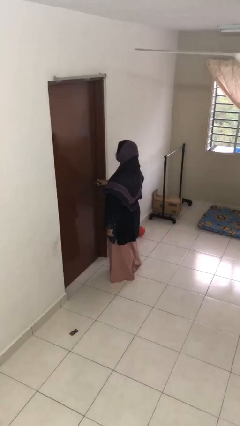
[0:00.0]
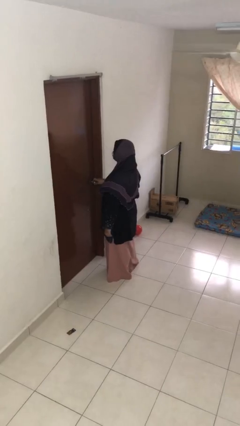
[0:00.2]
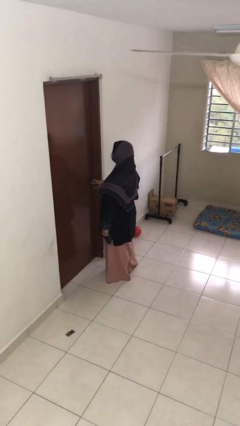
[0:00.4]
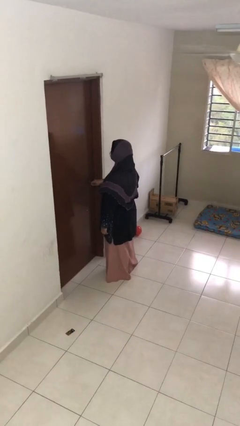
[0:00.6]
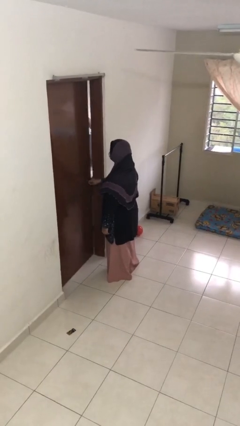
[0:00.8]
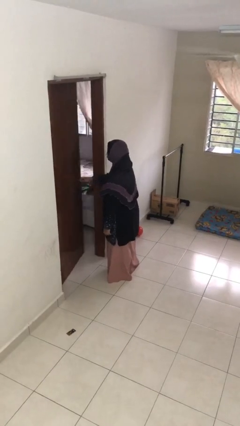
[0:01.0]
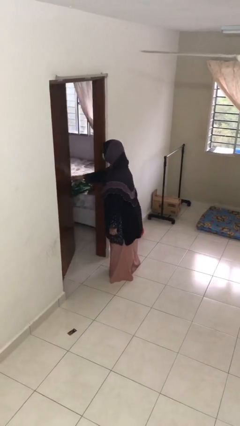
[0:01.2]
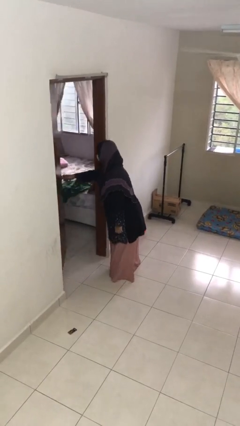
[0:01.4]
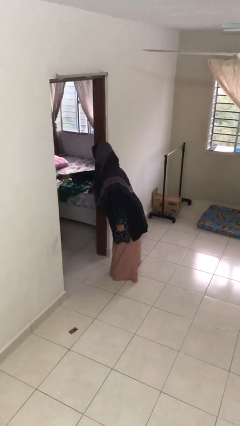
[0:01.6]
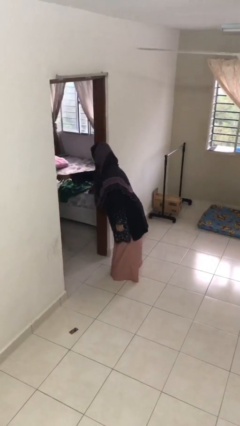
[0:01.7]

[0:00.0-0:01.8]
person opens facility door

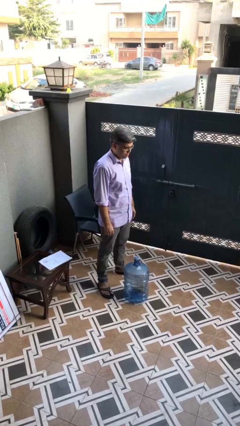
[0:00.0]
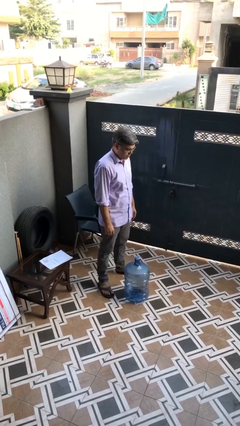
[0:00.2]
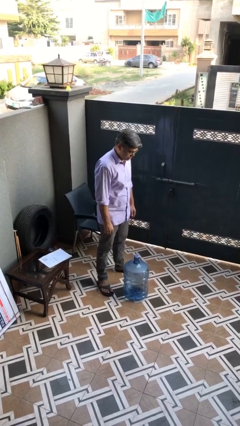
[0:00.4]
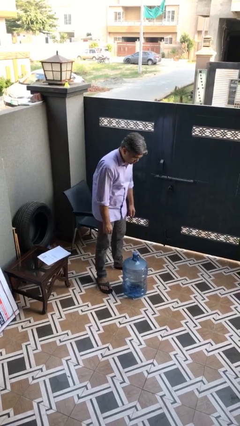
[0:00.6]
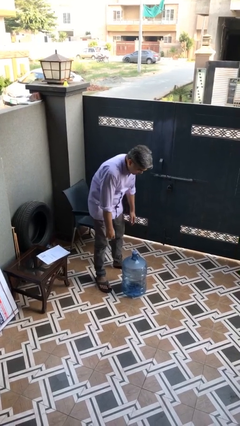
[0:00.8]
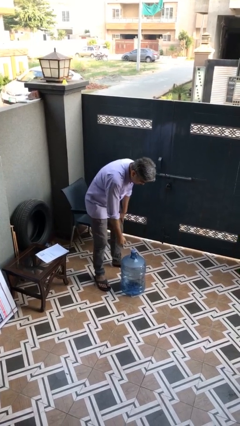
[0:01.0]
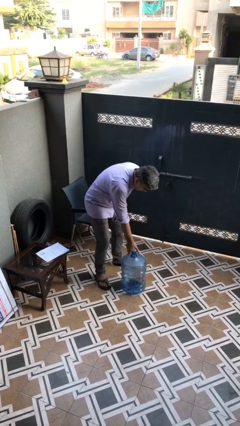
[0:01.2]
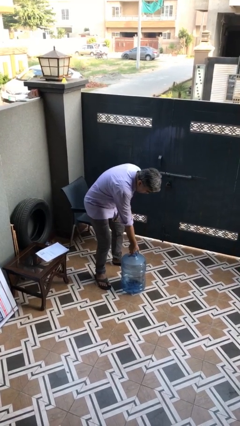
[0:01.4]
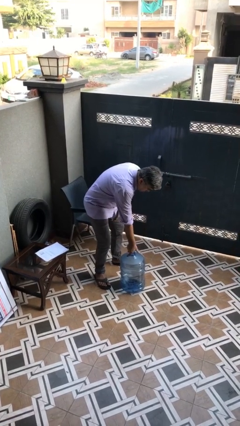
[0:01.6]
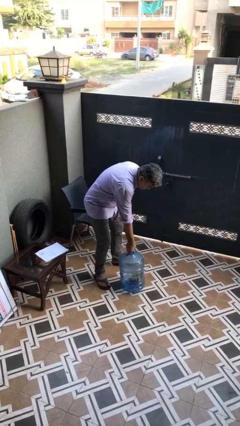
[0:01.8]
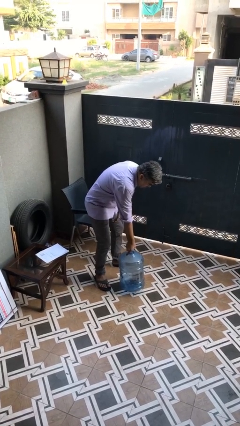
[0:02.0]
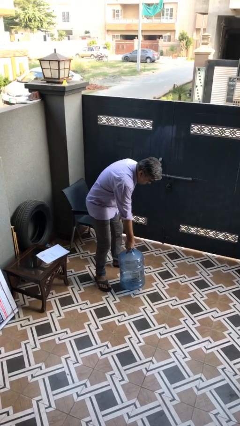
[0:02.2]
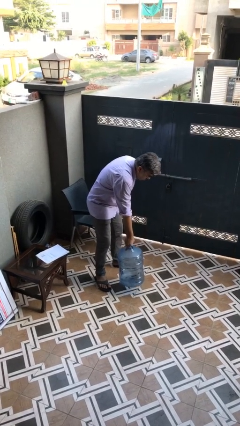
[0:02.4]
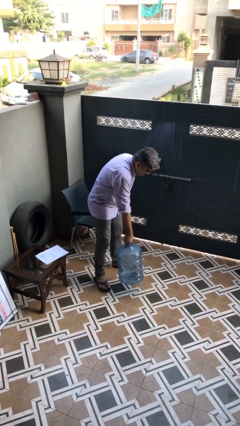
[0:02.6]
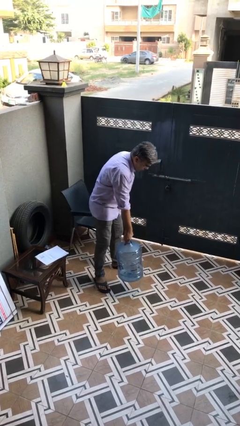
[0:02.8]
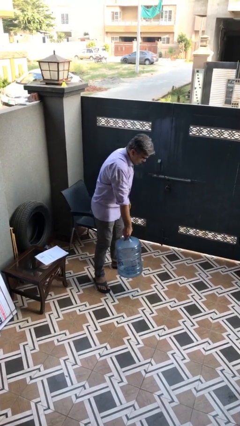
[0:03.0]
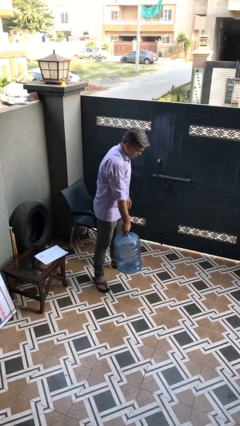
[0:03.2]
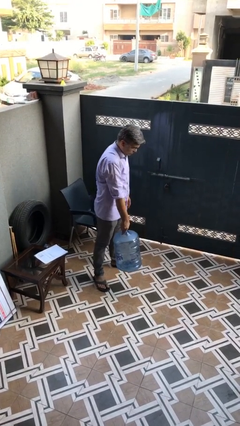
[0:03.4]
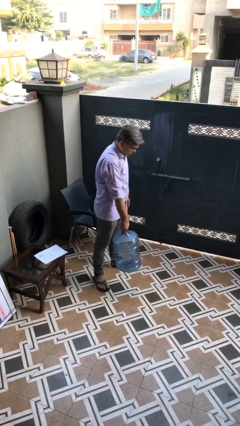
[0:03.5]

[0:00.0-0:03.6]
person picks up object from floor

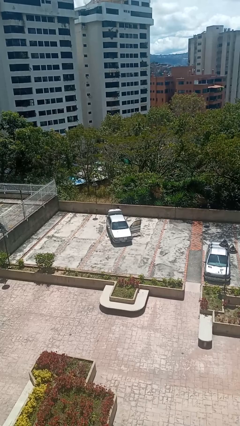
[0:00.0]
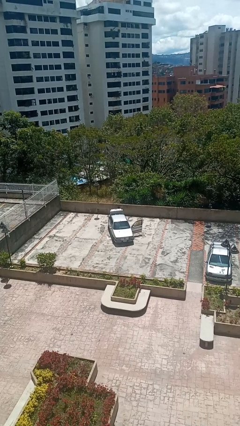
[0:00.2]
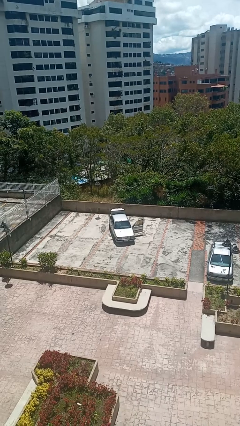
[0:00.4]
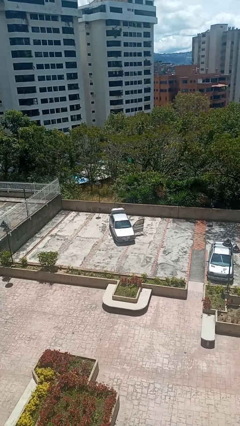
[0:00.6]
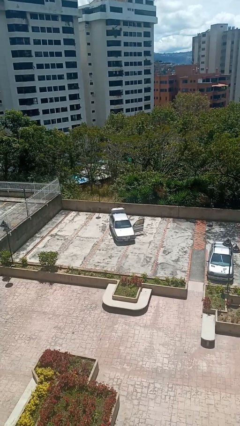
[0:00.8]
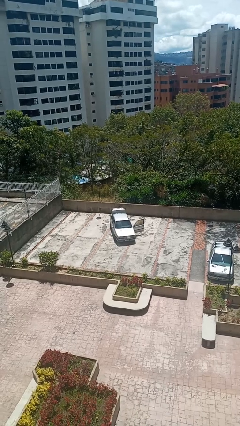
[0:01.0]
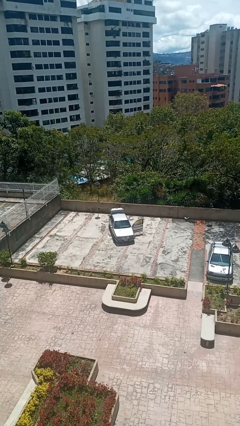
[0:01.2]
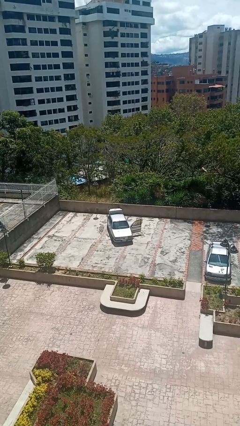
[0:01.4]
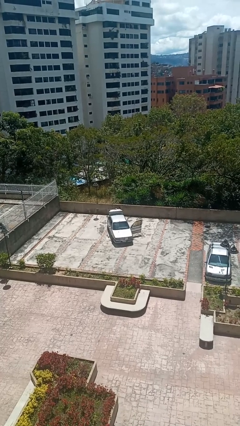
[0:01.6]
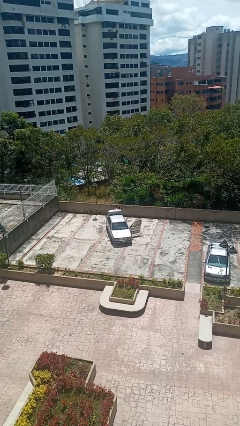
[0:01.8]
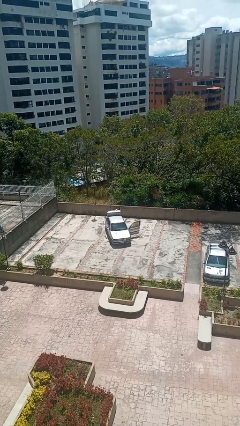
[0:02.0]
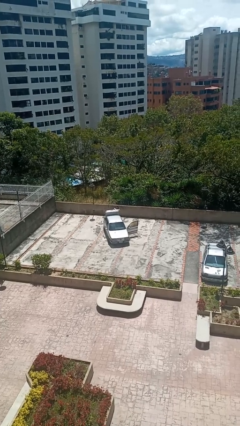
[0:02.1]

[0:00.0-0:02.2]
person unloads car

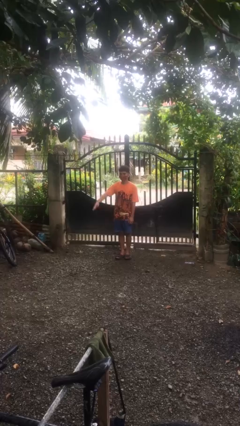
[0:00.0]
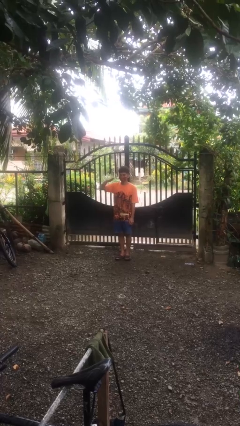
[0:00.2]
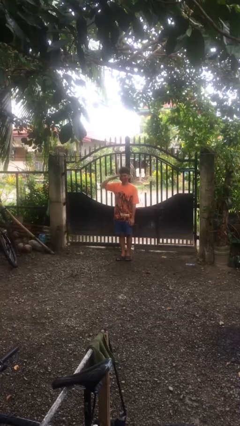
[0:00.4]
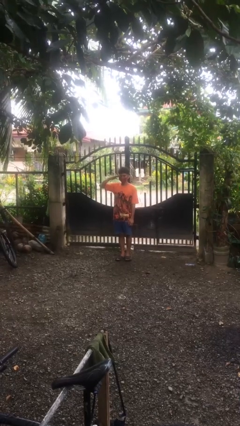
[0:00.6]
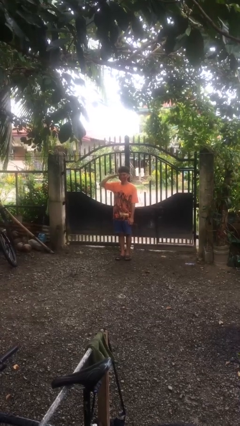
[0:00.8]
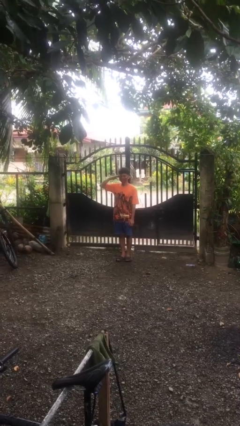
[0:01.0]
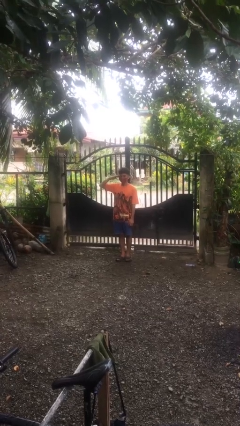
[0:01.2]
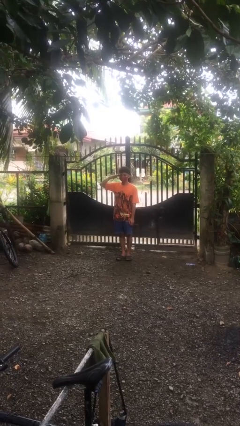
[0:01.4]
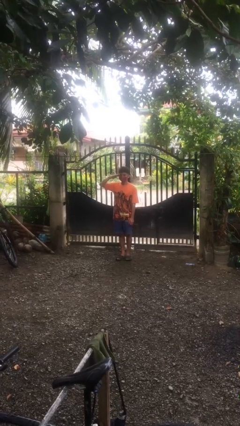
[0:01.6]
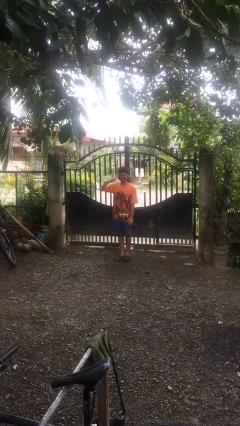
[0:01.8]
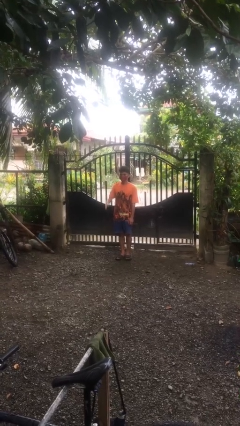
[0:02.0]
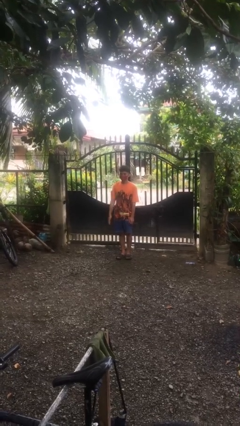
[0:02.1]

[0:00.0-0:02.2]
person salutes

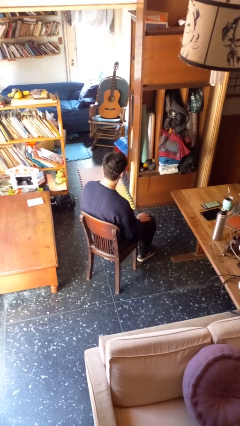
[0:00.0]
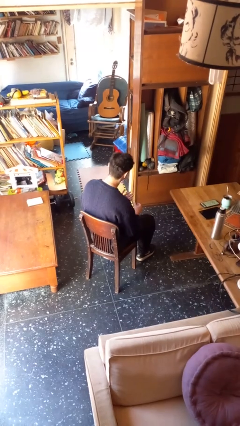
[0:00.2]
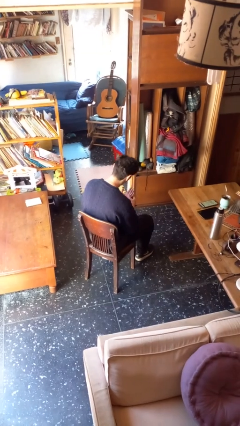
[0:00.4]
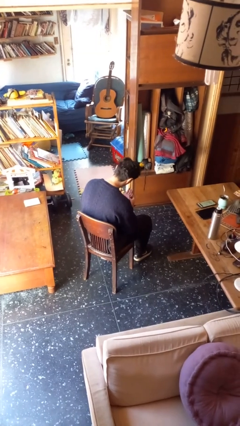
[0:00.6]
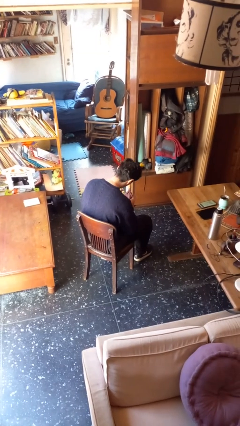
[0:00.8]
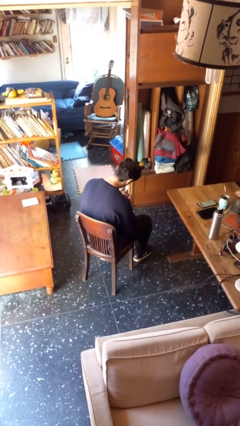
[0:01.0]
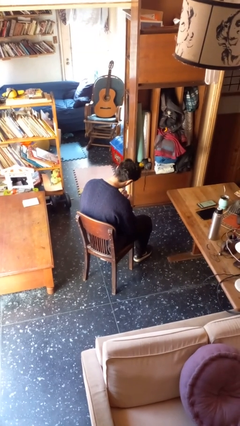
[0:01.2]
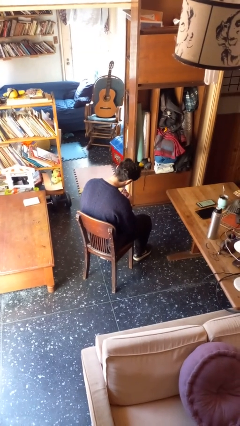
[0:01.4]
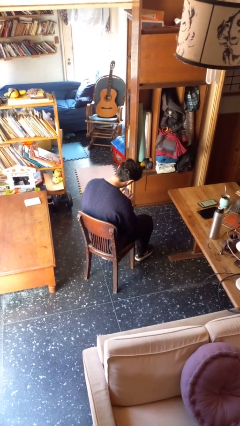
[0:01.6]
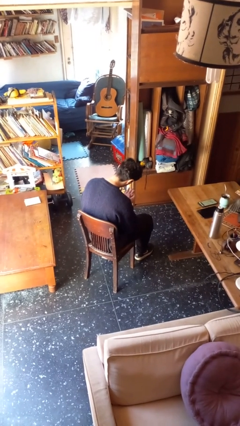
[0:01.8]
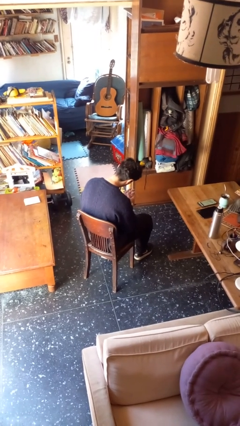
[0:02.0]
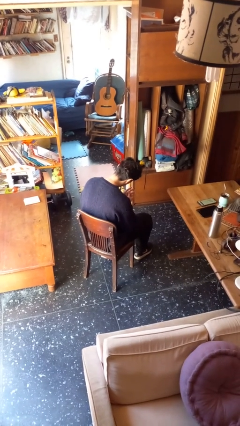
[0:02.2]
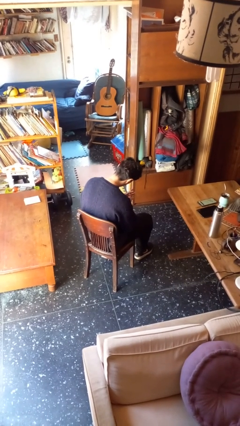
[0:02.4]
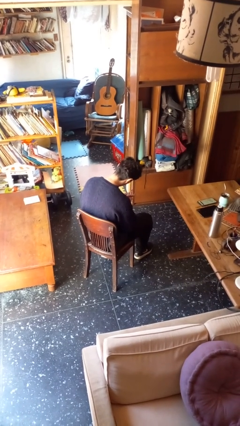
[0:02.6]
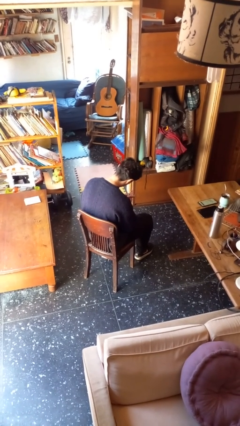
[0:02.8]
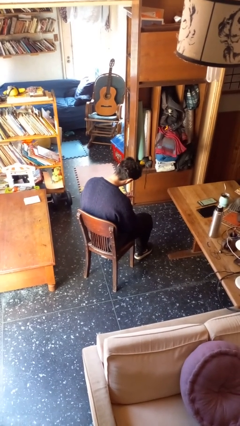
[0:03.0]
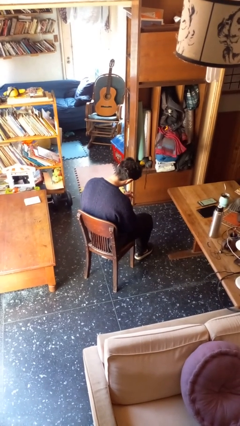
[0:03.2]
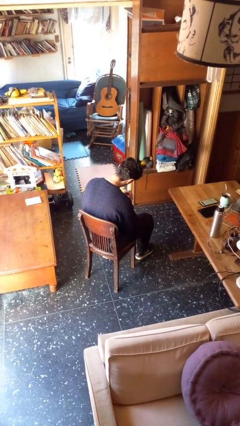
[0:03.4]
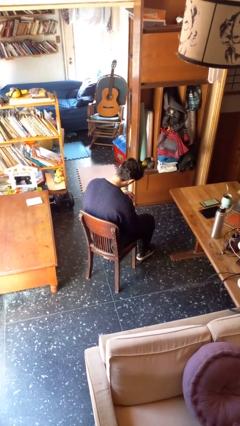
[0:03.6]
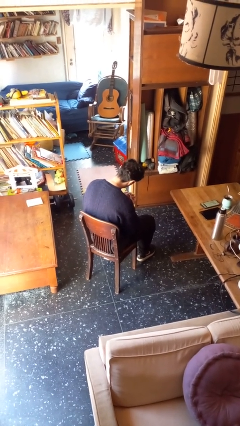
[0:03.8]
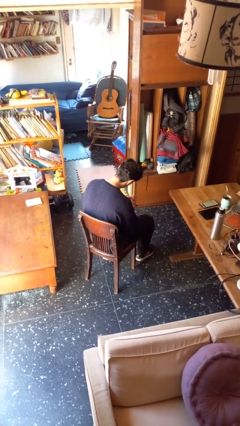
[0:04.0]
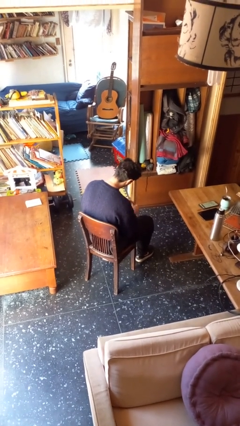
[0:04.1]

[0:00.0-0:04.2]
person looks at hands in lap

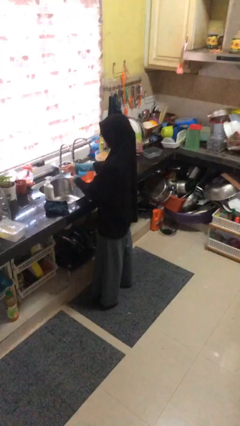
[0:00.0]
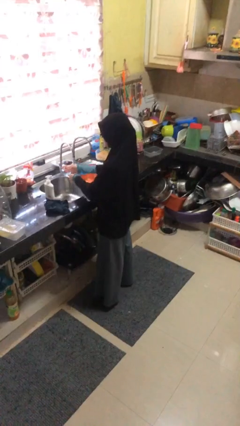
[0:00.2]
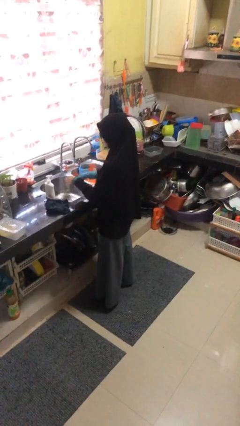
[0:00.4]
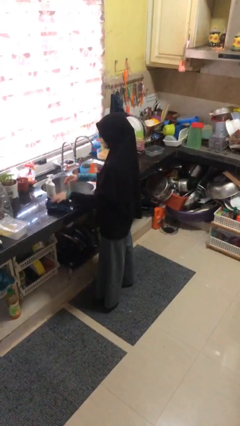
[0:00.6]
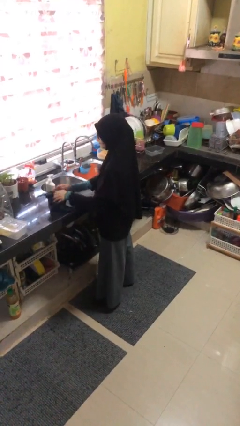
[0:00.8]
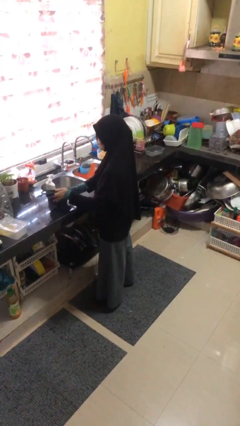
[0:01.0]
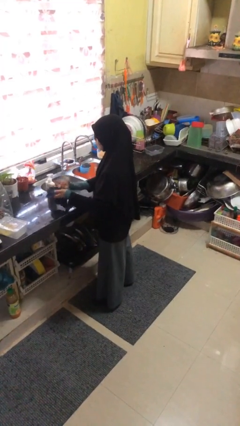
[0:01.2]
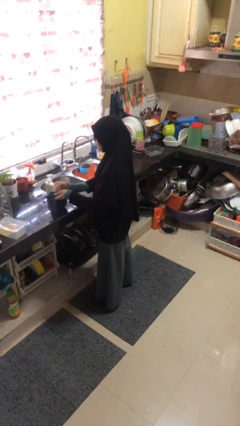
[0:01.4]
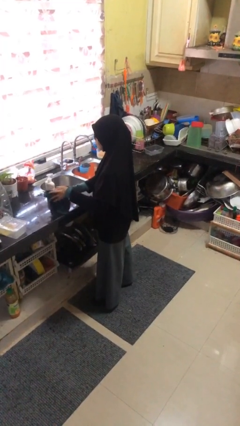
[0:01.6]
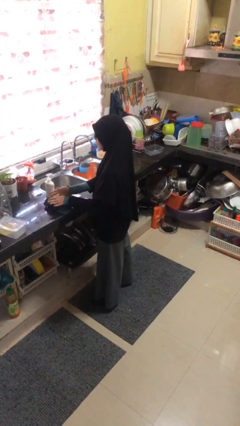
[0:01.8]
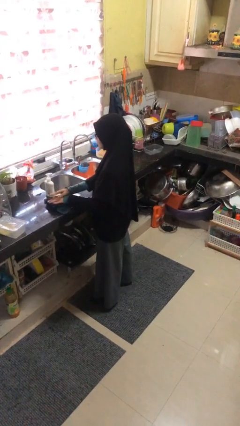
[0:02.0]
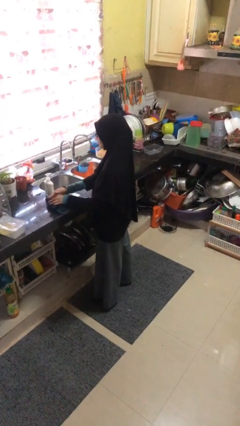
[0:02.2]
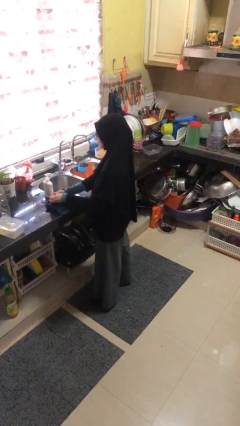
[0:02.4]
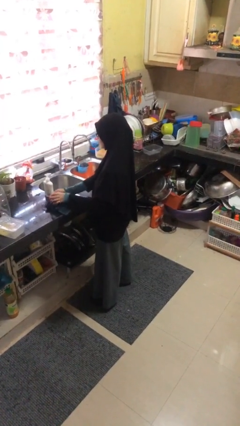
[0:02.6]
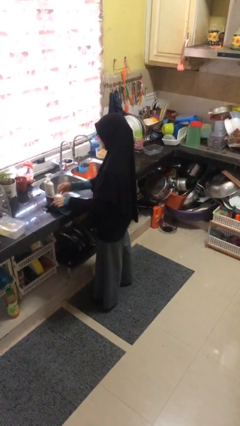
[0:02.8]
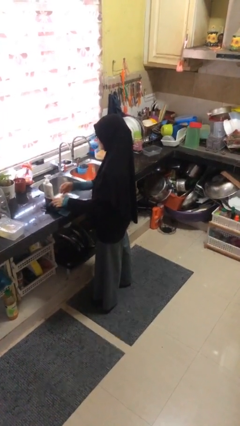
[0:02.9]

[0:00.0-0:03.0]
person dries hands with towel

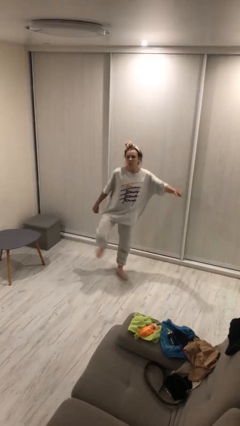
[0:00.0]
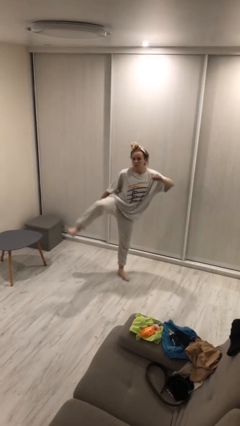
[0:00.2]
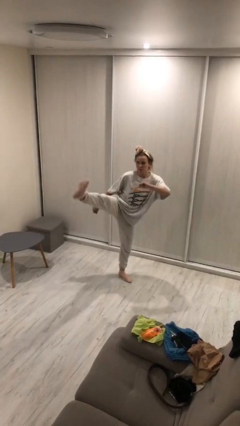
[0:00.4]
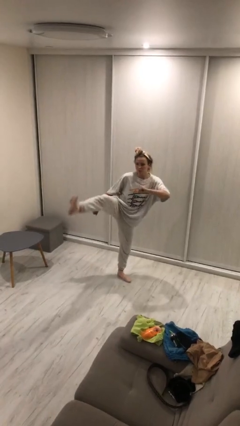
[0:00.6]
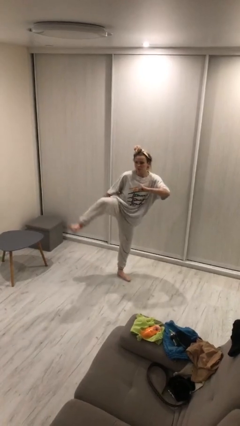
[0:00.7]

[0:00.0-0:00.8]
person karate kicks
